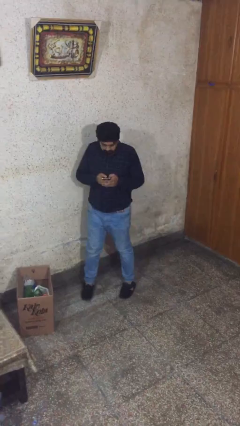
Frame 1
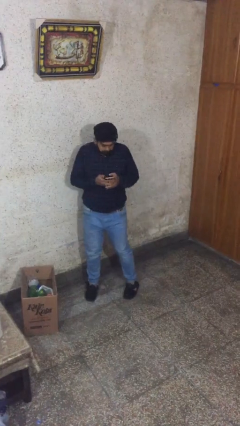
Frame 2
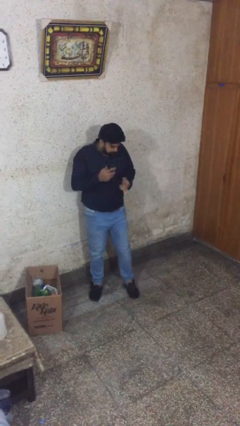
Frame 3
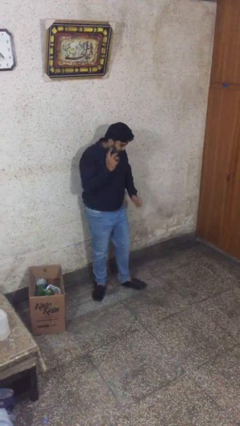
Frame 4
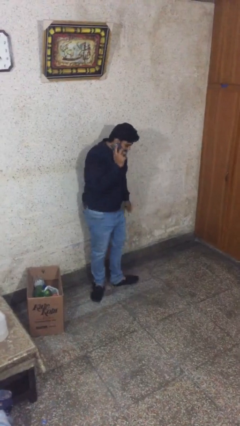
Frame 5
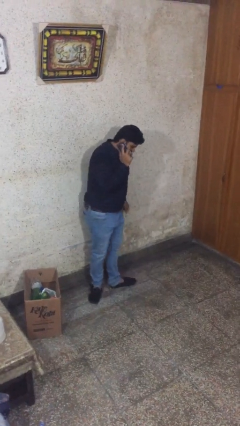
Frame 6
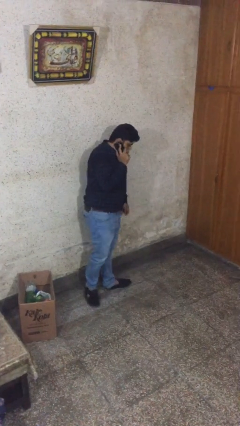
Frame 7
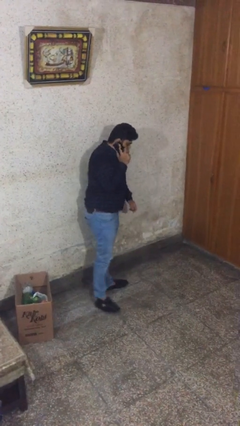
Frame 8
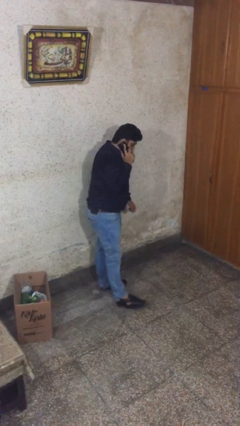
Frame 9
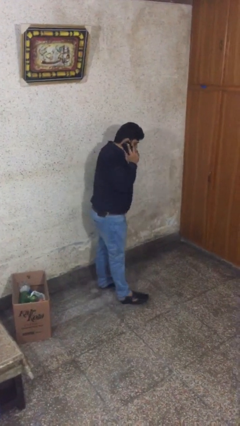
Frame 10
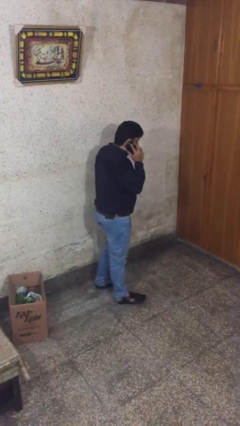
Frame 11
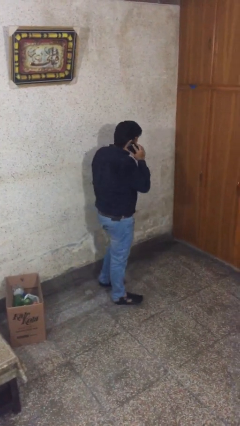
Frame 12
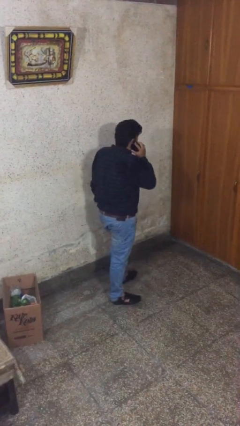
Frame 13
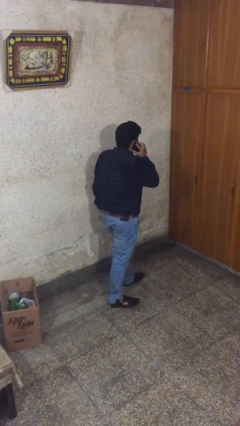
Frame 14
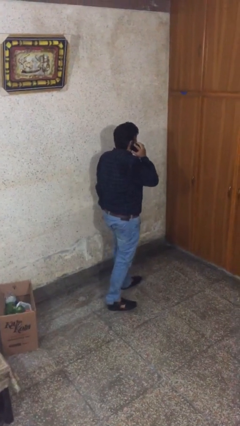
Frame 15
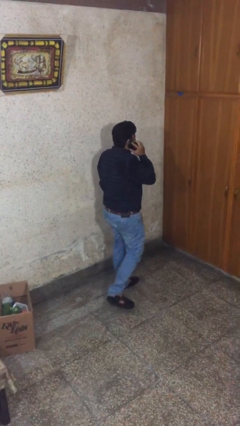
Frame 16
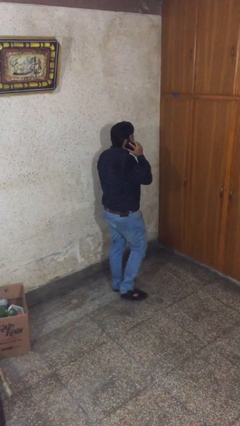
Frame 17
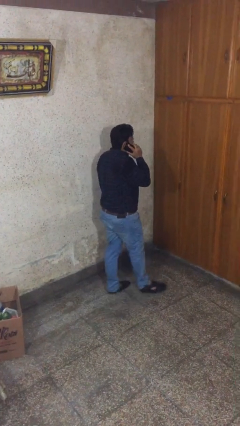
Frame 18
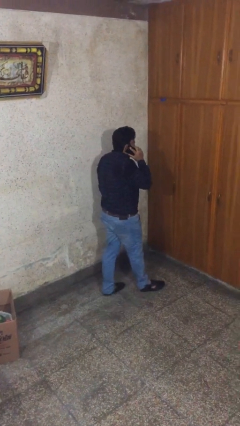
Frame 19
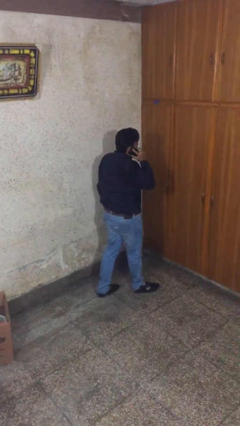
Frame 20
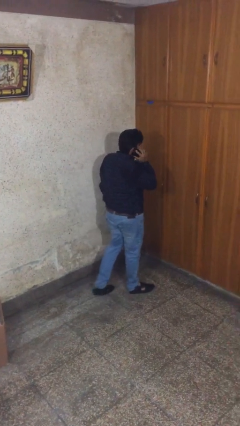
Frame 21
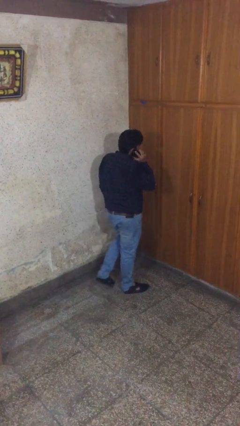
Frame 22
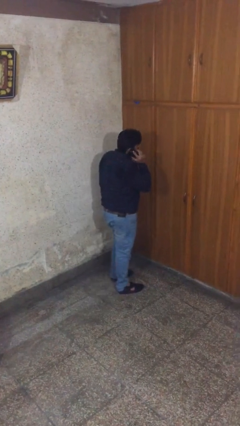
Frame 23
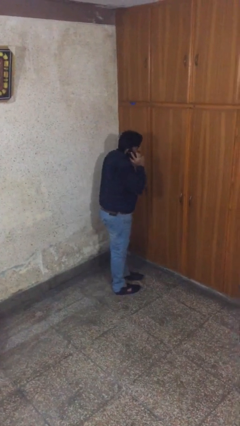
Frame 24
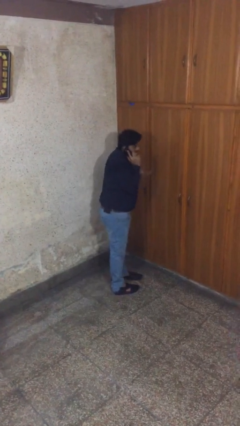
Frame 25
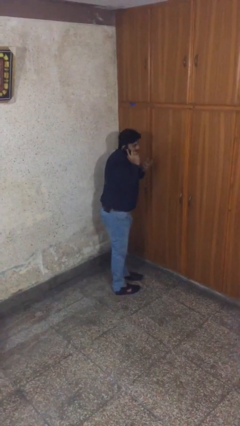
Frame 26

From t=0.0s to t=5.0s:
person talks on phone

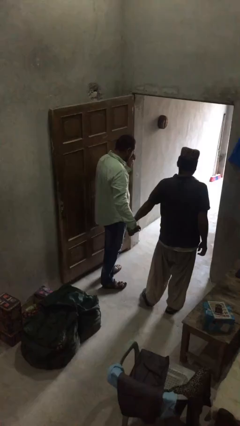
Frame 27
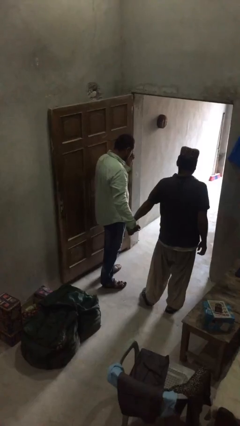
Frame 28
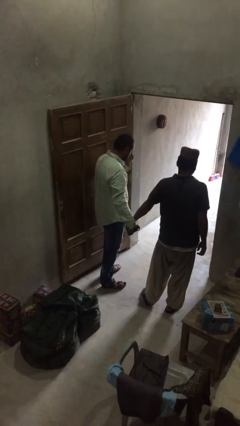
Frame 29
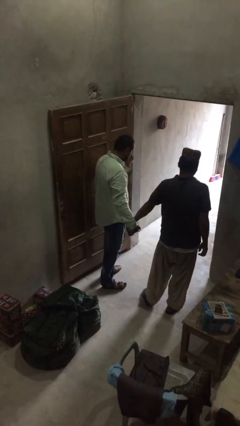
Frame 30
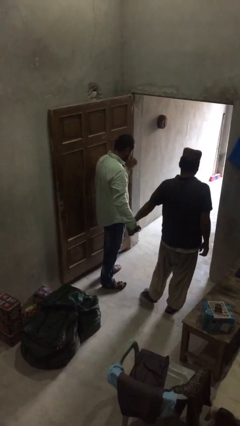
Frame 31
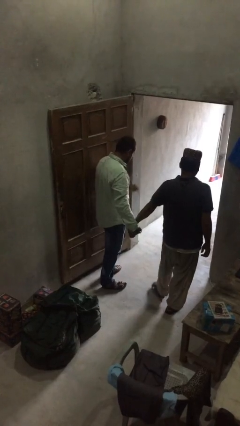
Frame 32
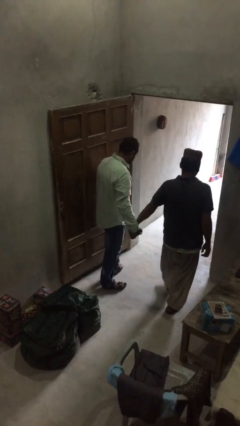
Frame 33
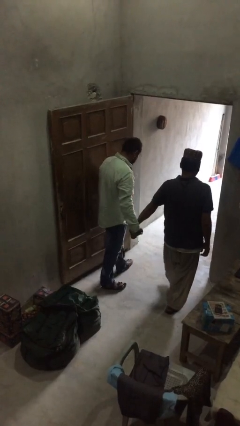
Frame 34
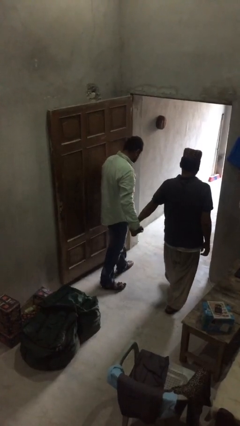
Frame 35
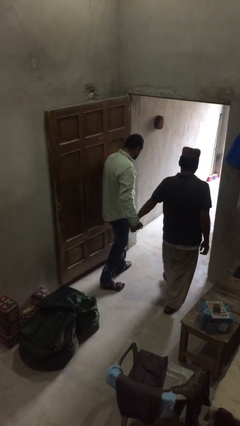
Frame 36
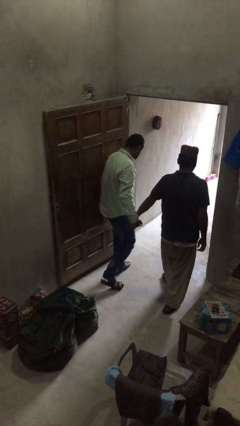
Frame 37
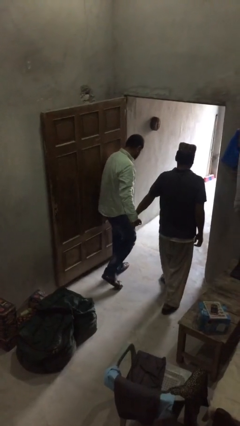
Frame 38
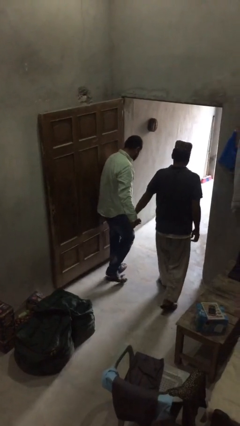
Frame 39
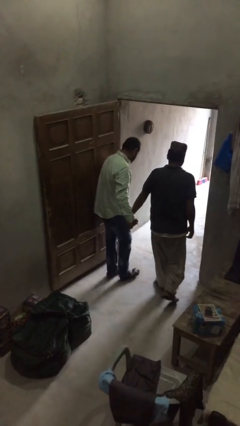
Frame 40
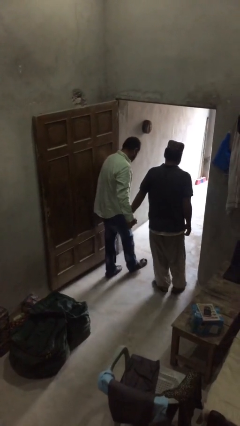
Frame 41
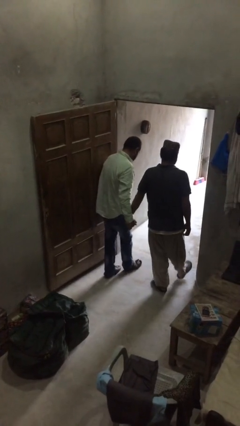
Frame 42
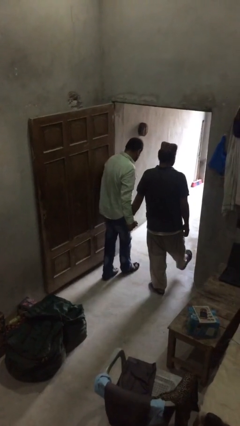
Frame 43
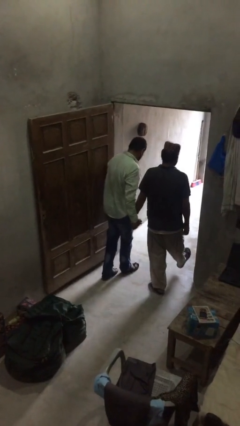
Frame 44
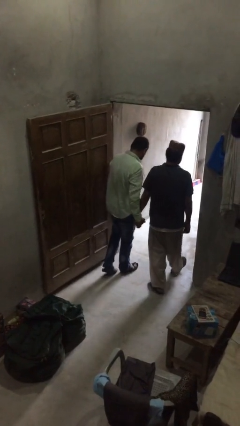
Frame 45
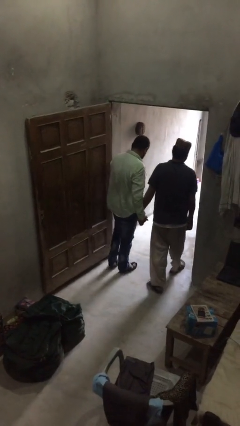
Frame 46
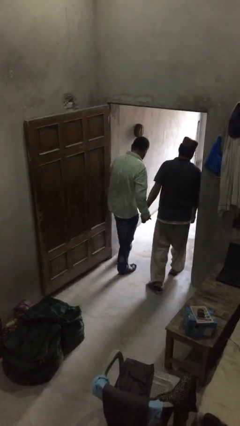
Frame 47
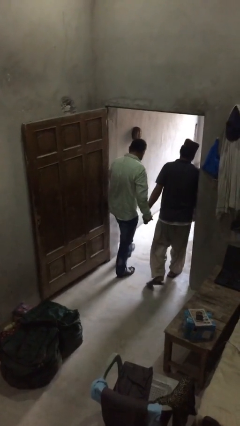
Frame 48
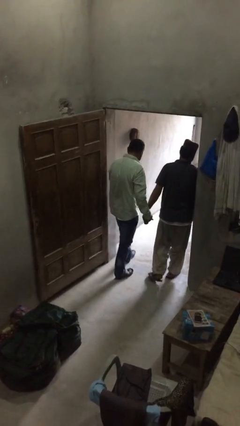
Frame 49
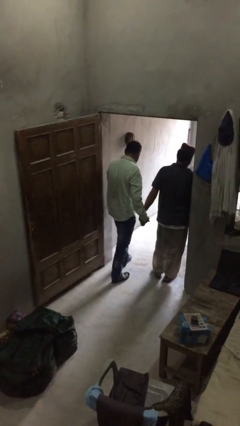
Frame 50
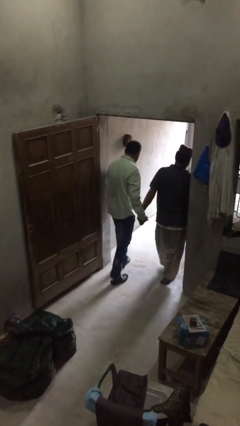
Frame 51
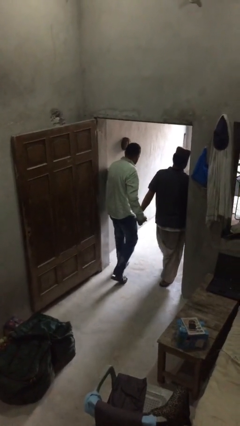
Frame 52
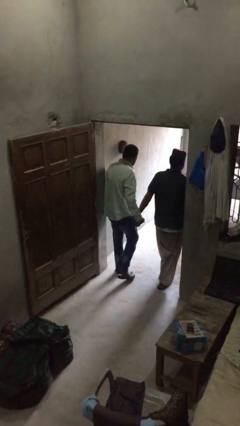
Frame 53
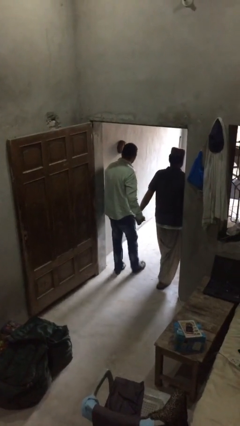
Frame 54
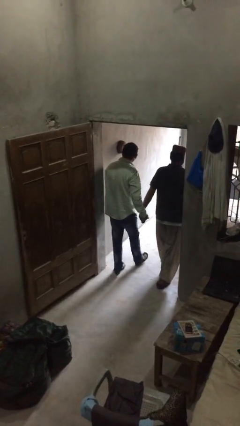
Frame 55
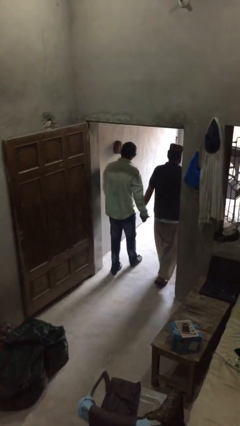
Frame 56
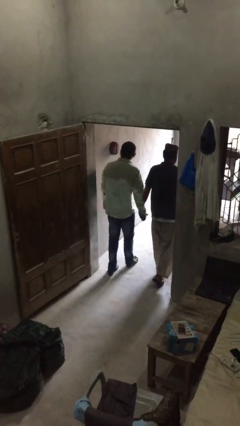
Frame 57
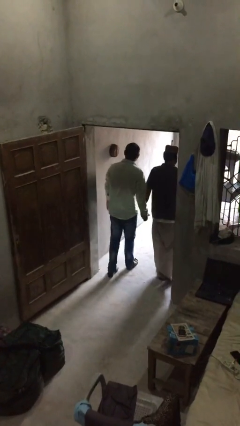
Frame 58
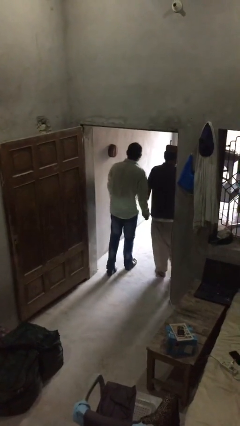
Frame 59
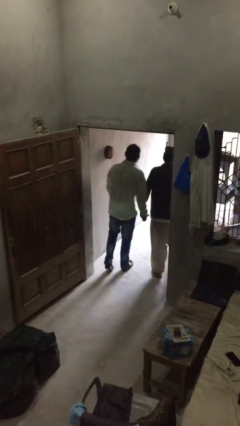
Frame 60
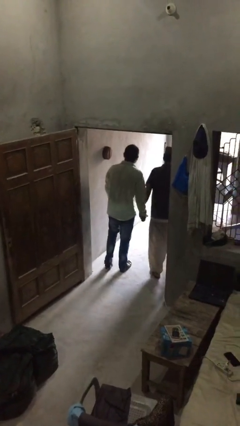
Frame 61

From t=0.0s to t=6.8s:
person holds hand

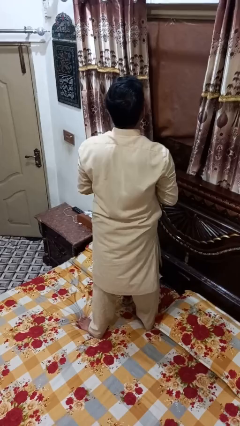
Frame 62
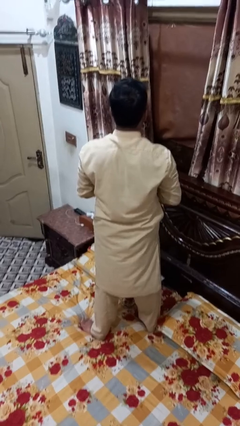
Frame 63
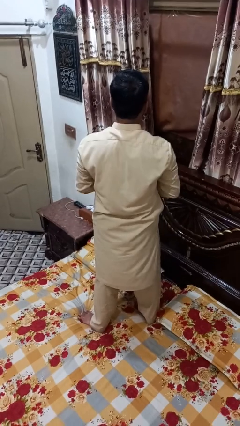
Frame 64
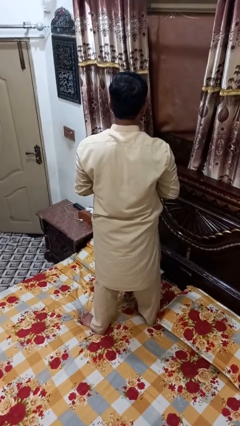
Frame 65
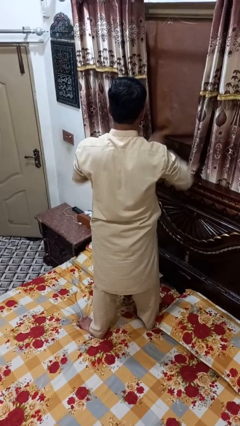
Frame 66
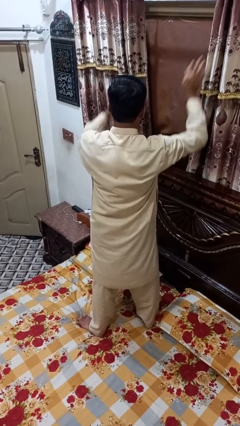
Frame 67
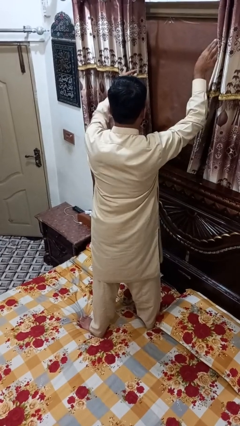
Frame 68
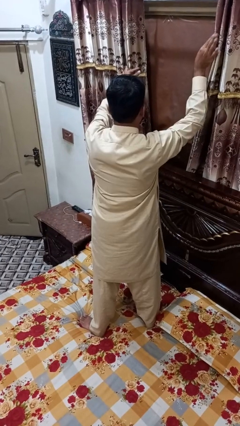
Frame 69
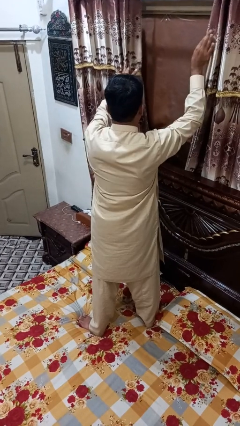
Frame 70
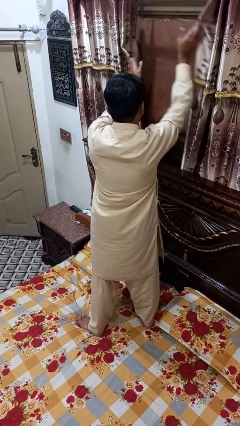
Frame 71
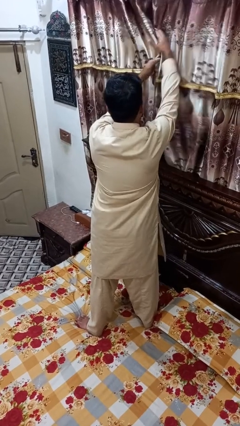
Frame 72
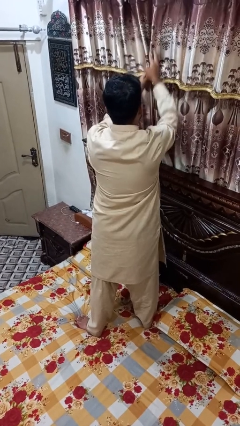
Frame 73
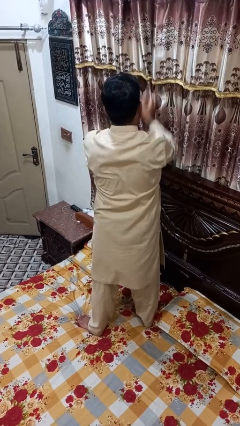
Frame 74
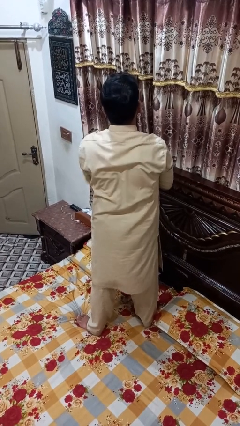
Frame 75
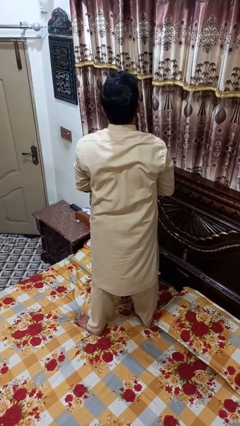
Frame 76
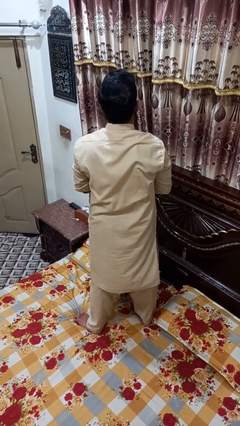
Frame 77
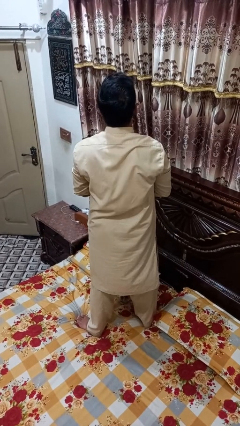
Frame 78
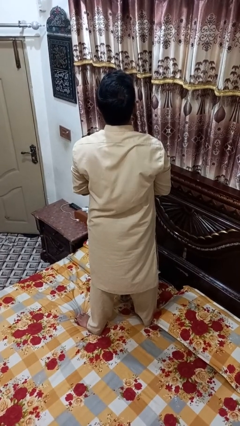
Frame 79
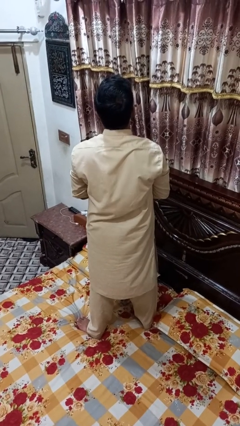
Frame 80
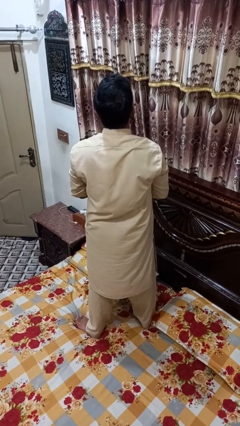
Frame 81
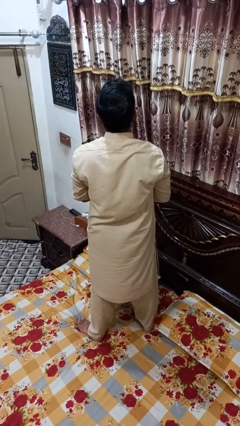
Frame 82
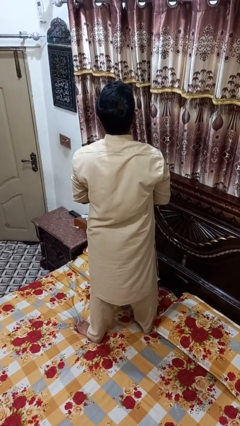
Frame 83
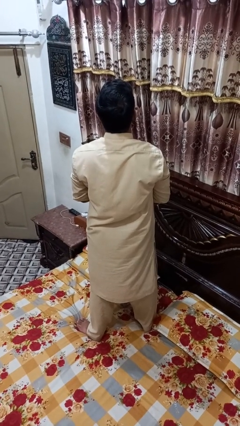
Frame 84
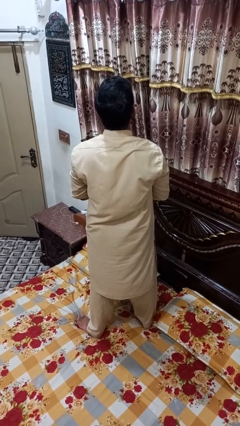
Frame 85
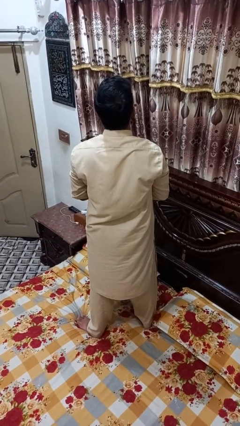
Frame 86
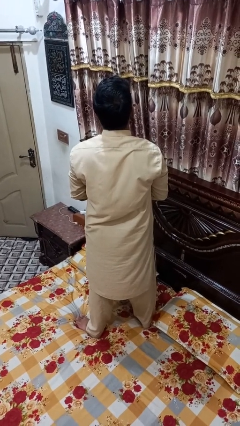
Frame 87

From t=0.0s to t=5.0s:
person closes curtains

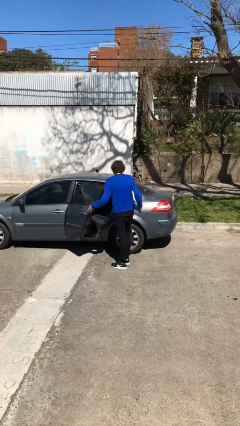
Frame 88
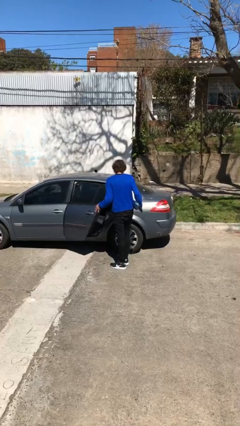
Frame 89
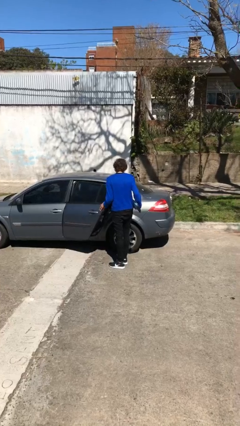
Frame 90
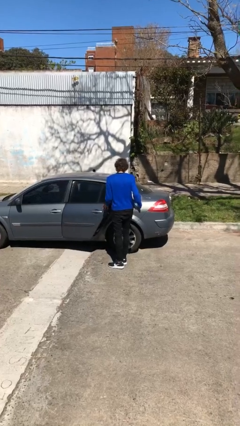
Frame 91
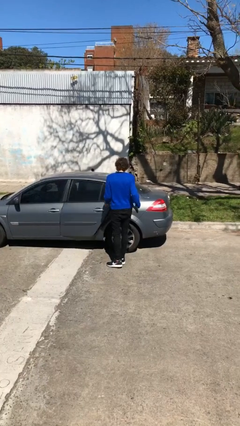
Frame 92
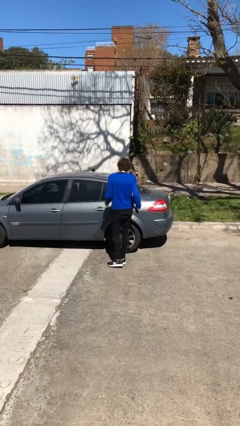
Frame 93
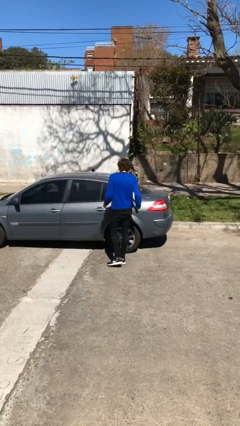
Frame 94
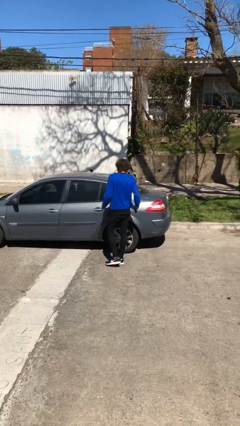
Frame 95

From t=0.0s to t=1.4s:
person closes car door
